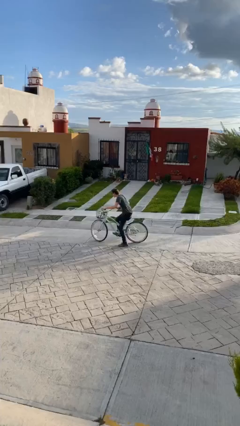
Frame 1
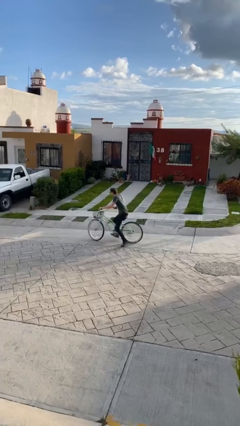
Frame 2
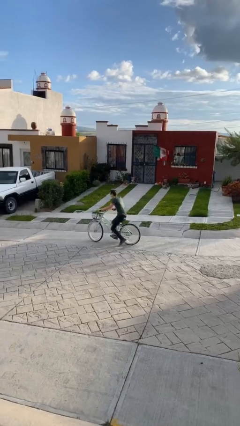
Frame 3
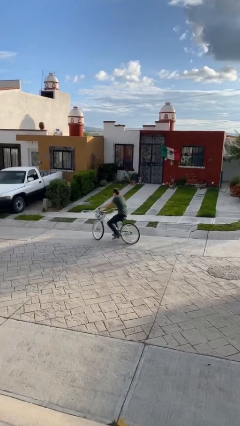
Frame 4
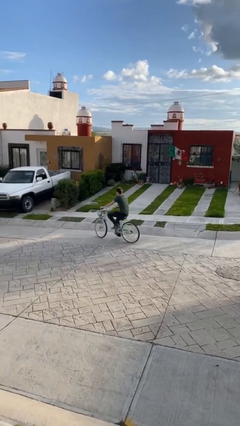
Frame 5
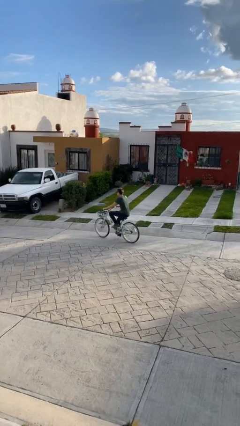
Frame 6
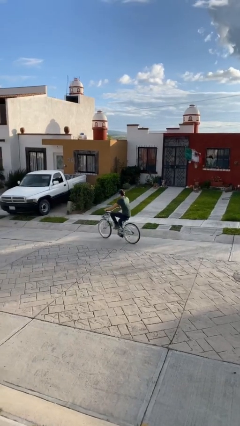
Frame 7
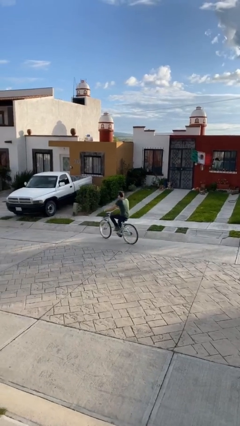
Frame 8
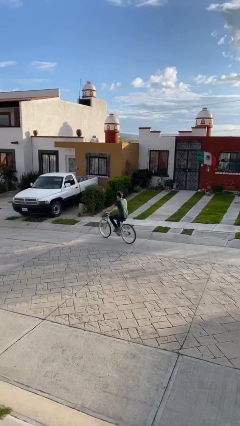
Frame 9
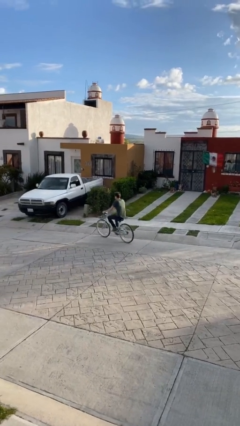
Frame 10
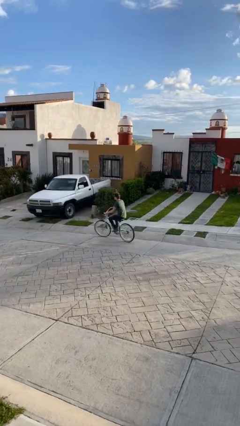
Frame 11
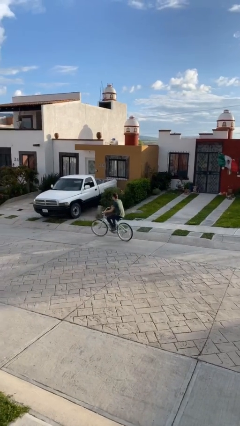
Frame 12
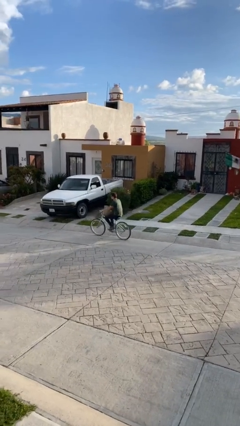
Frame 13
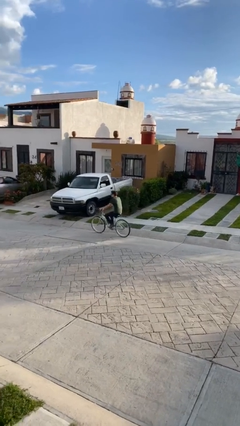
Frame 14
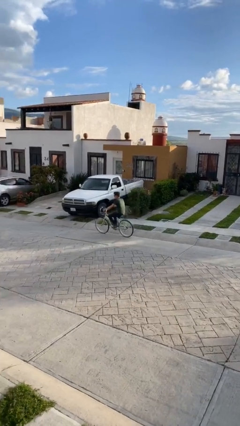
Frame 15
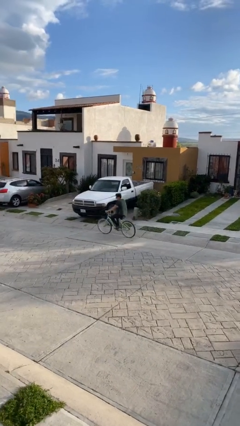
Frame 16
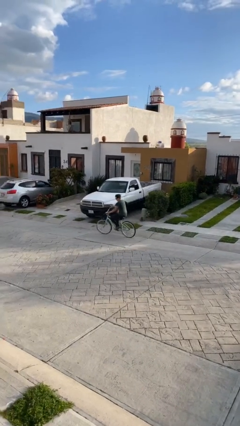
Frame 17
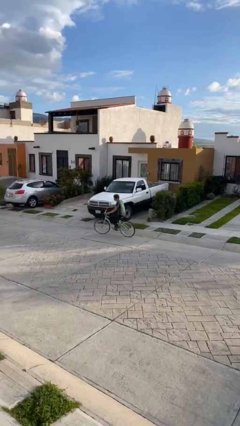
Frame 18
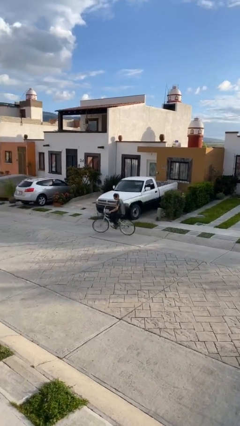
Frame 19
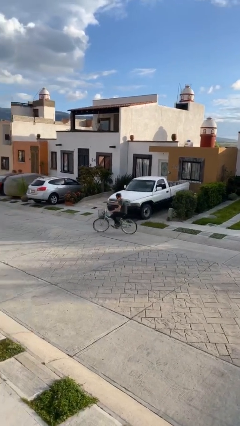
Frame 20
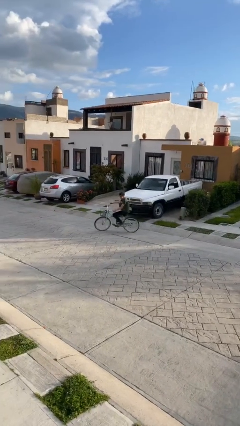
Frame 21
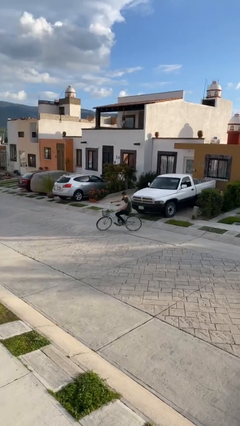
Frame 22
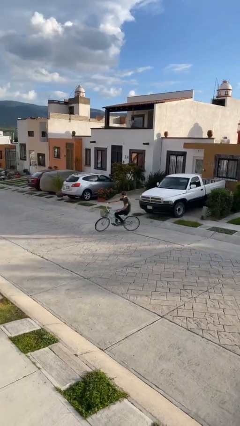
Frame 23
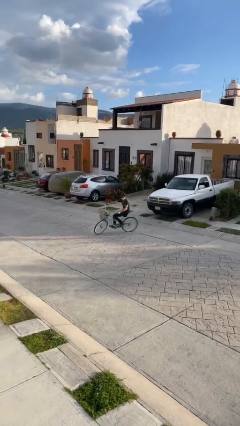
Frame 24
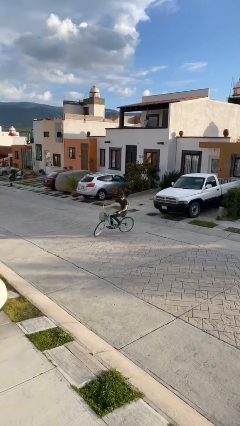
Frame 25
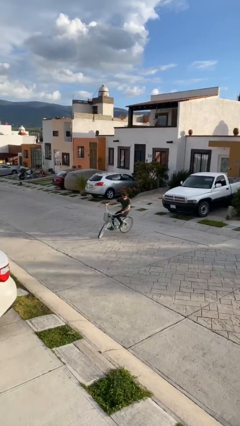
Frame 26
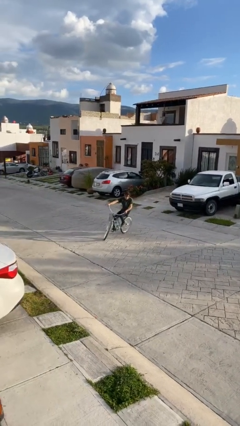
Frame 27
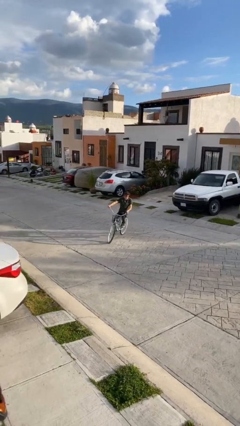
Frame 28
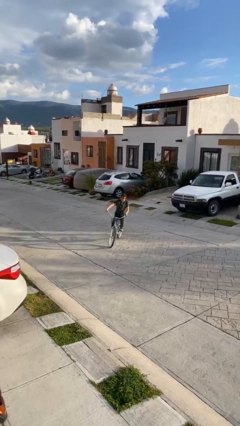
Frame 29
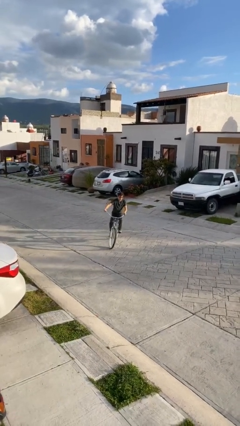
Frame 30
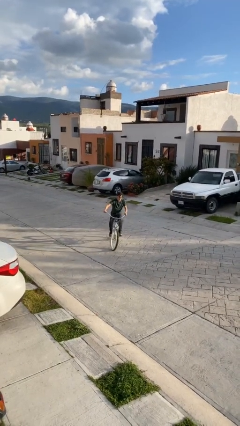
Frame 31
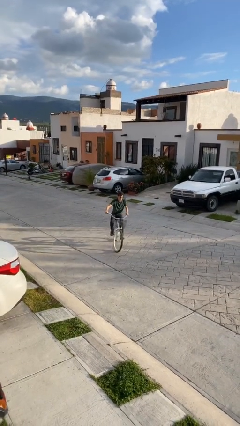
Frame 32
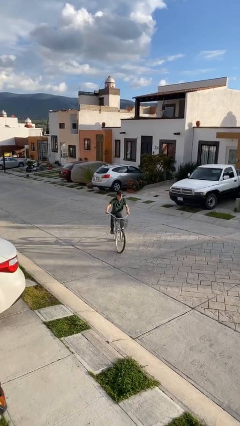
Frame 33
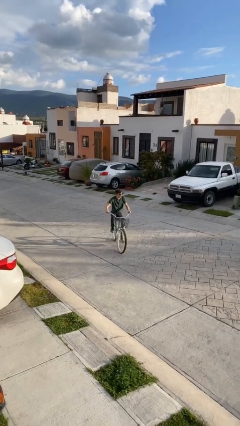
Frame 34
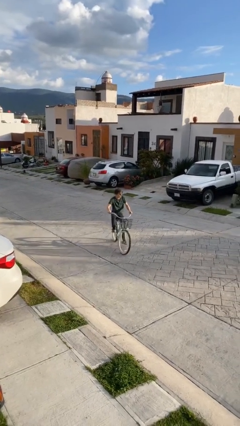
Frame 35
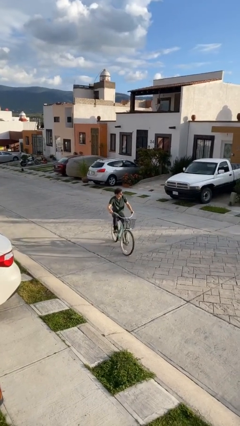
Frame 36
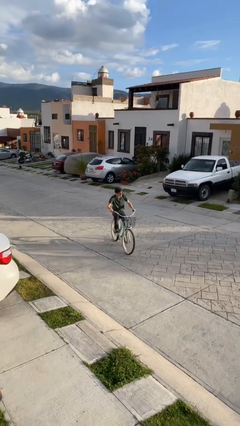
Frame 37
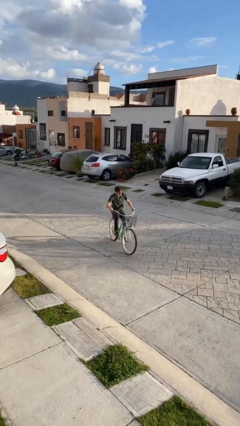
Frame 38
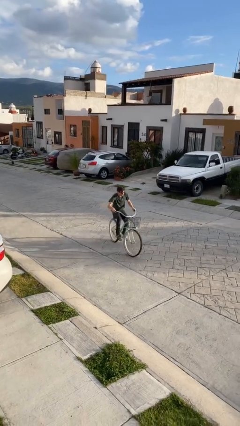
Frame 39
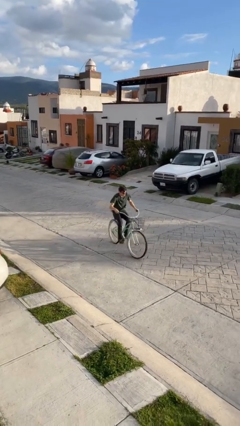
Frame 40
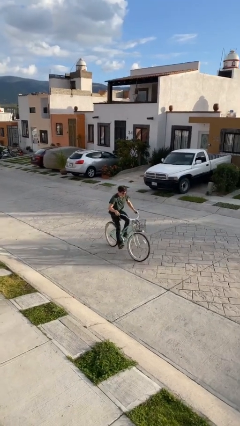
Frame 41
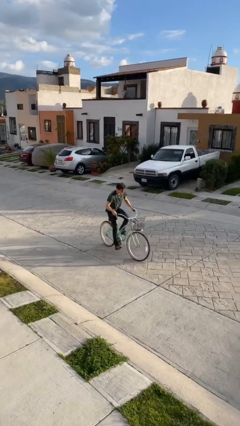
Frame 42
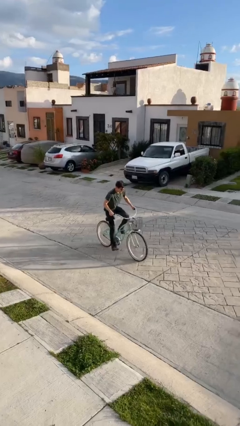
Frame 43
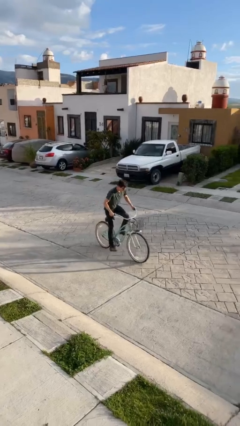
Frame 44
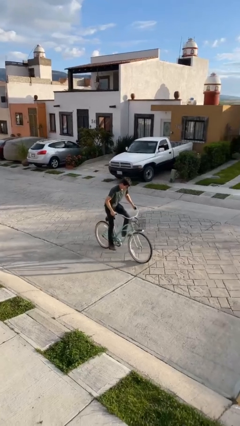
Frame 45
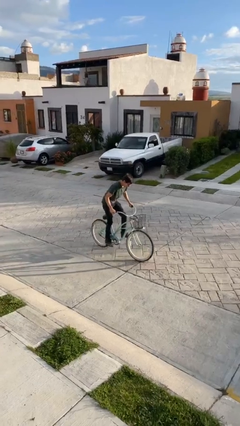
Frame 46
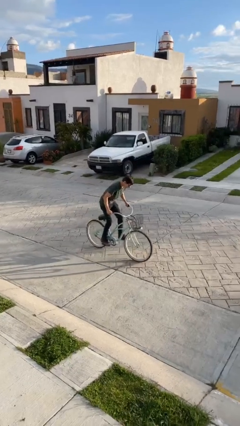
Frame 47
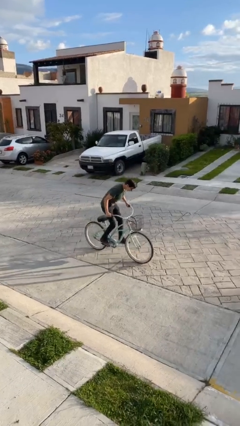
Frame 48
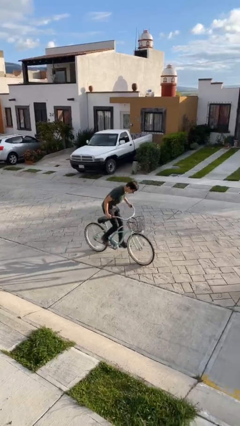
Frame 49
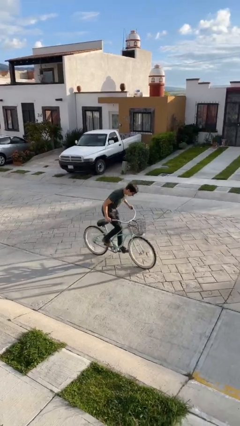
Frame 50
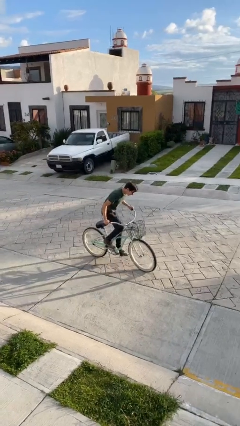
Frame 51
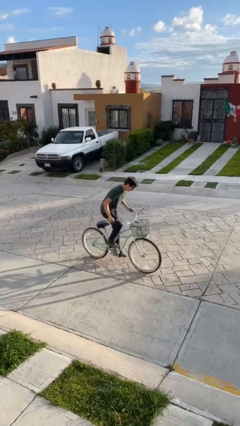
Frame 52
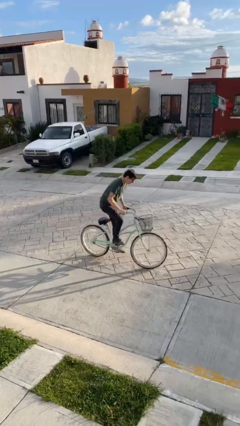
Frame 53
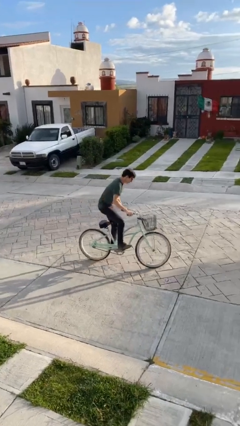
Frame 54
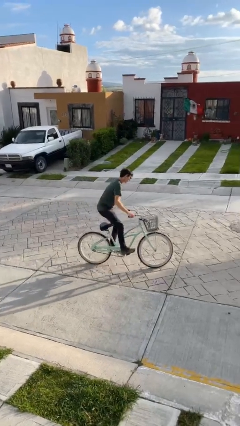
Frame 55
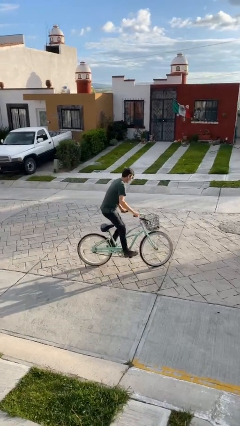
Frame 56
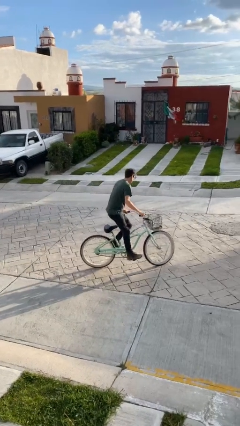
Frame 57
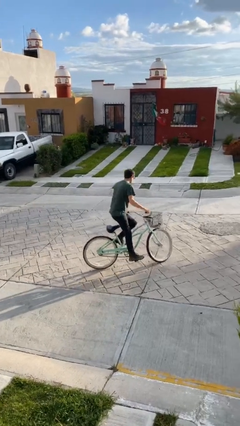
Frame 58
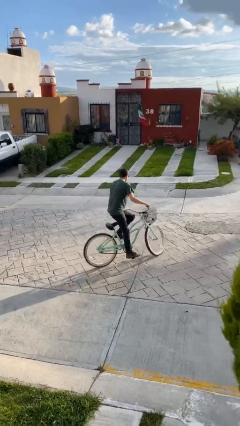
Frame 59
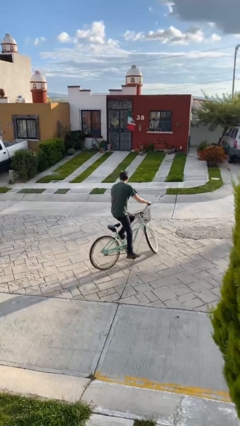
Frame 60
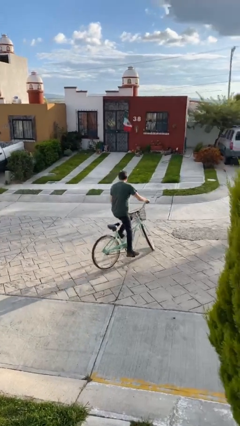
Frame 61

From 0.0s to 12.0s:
person rides bicycle

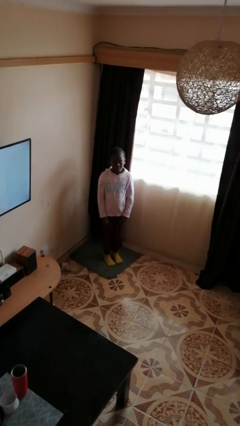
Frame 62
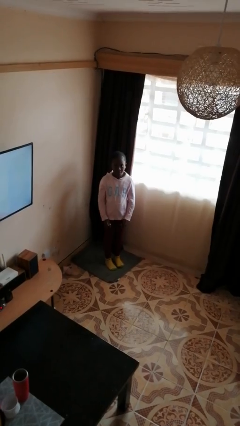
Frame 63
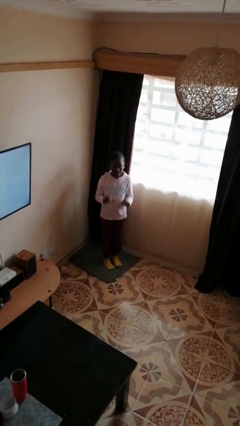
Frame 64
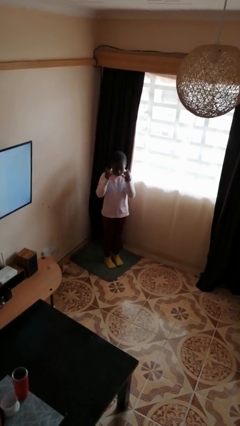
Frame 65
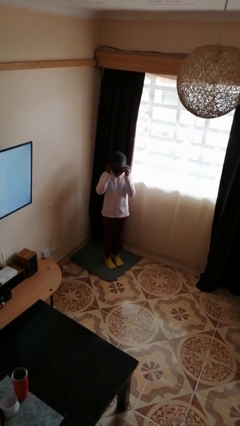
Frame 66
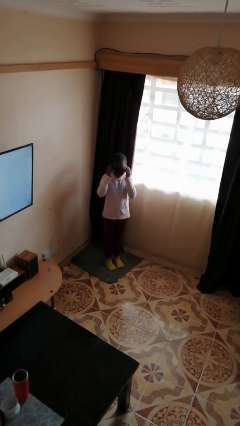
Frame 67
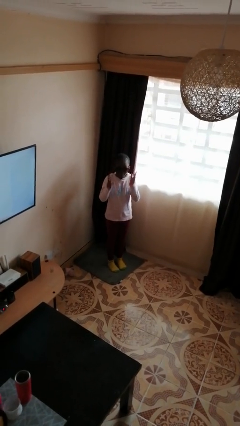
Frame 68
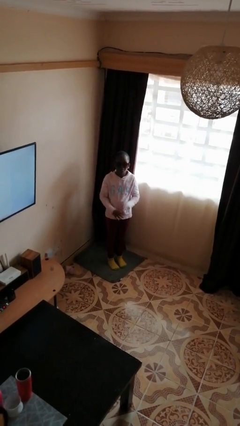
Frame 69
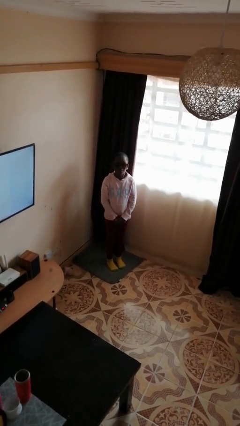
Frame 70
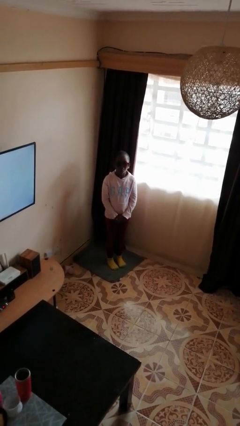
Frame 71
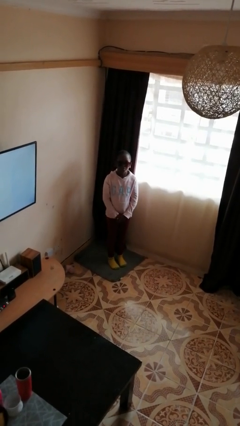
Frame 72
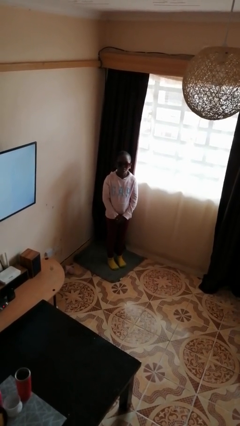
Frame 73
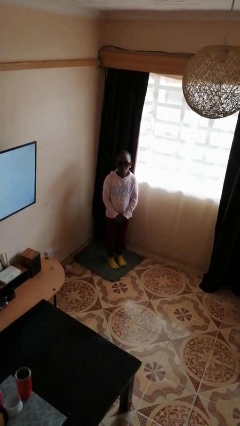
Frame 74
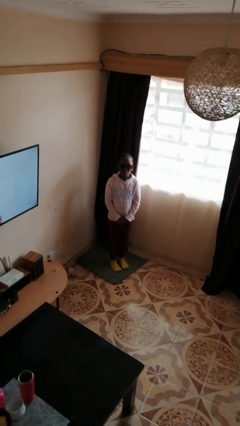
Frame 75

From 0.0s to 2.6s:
person puts on sunglasses

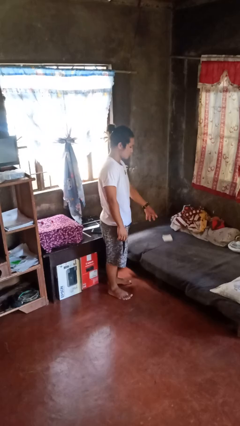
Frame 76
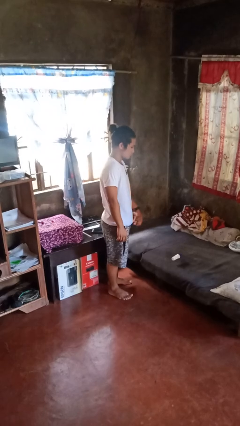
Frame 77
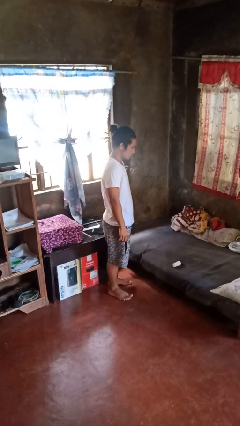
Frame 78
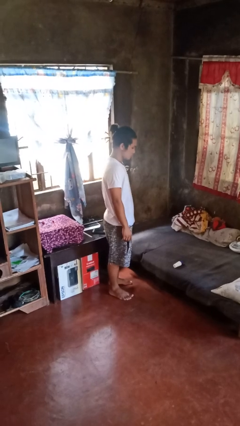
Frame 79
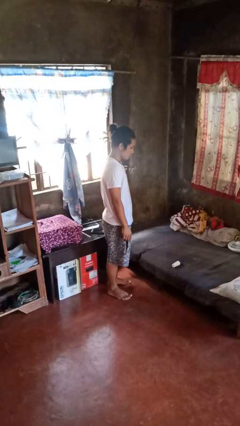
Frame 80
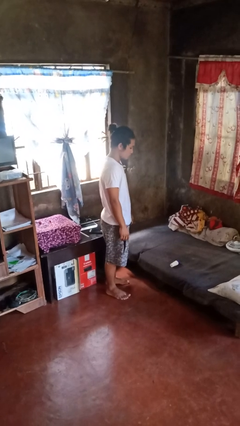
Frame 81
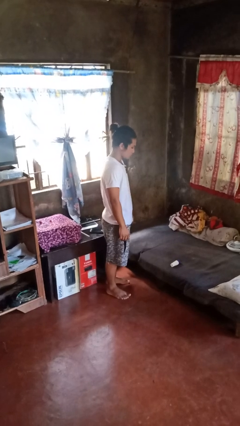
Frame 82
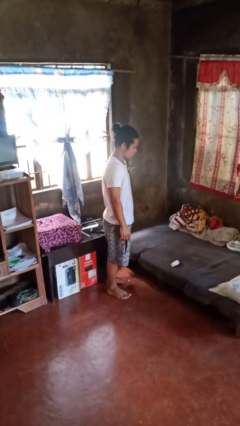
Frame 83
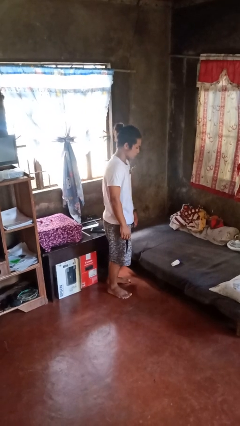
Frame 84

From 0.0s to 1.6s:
person throws object on bed

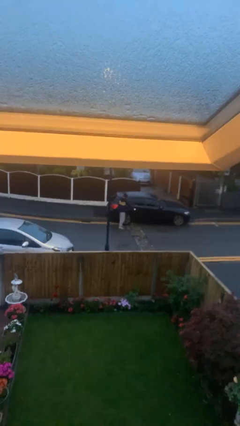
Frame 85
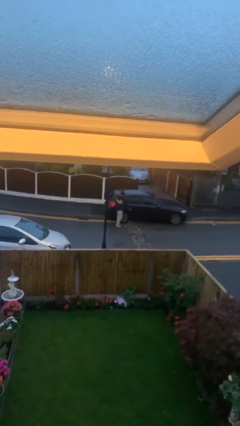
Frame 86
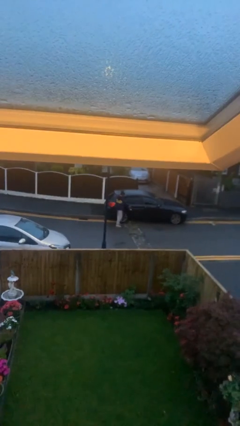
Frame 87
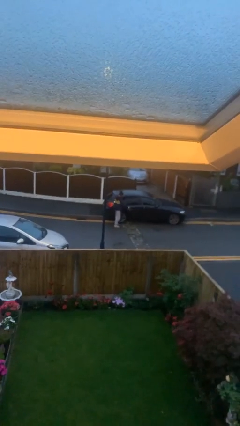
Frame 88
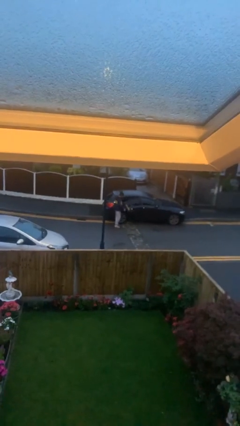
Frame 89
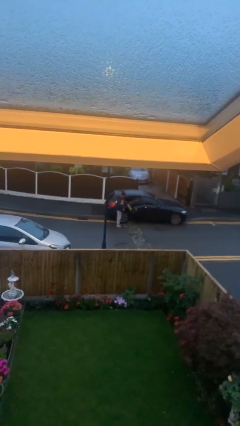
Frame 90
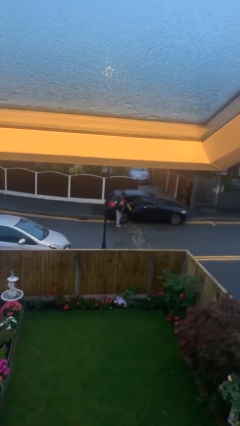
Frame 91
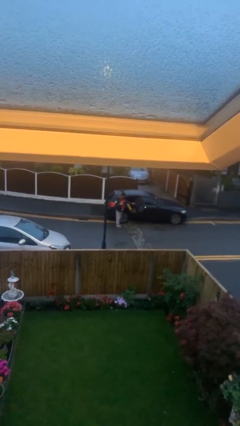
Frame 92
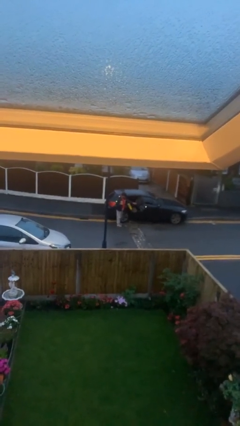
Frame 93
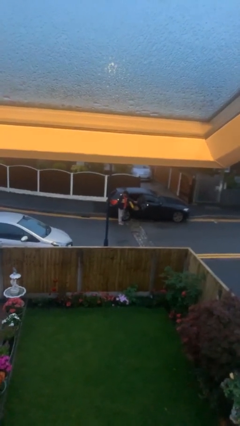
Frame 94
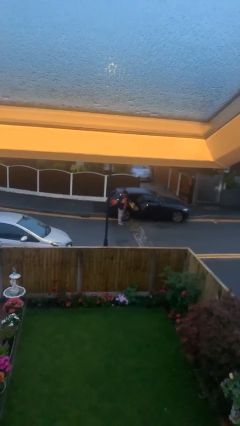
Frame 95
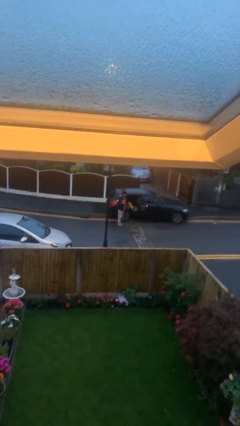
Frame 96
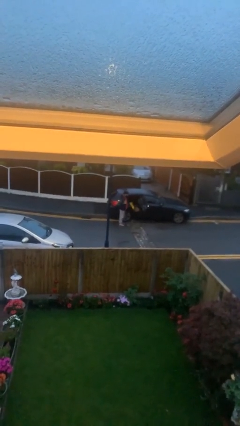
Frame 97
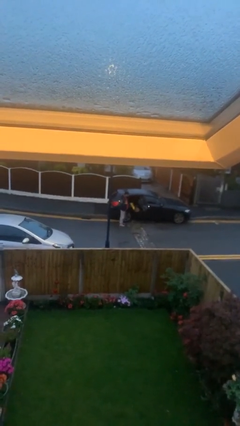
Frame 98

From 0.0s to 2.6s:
person opens car door
